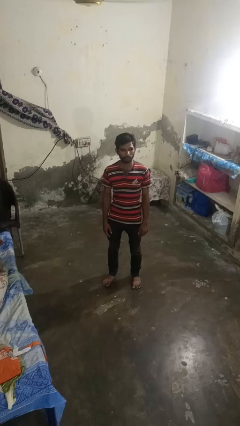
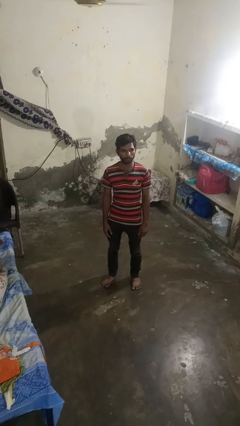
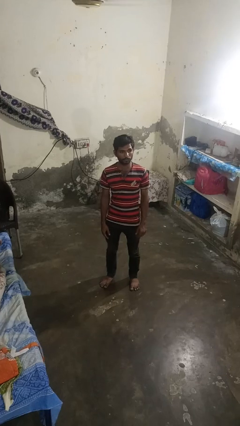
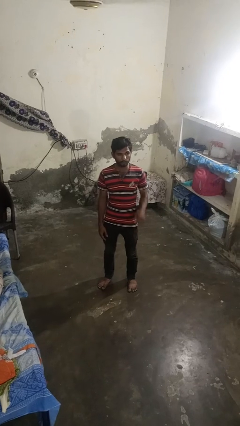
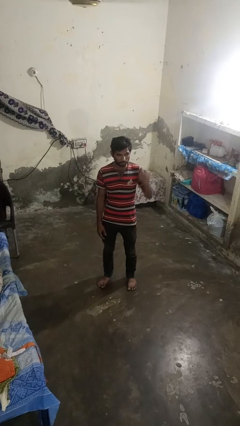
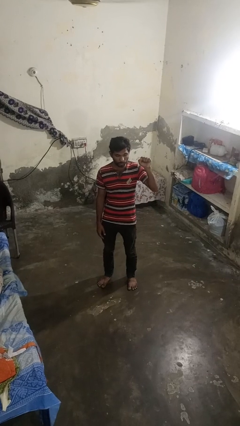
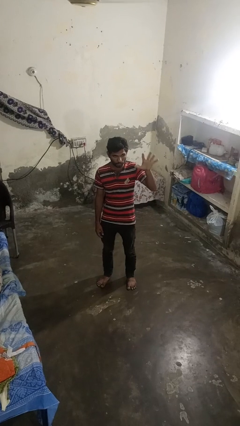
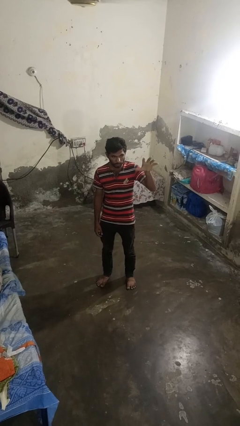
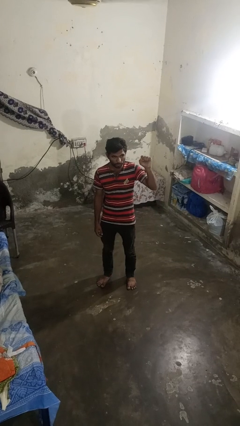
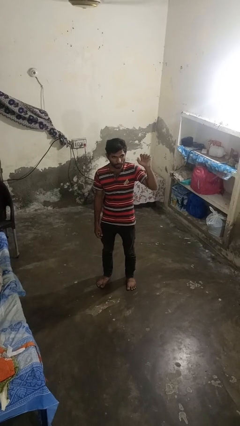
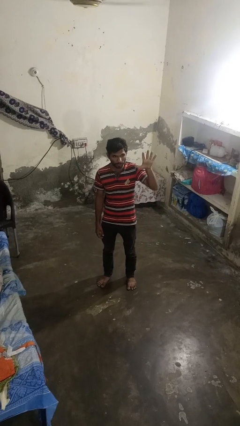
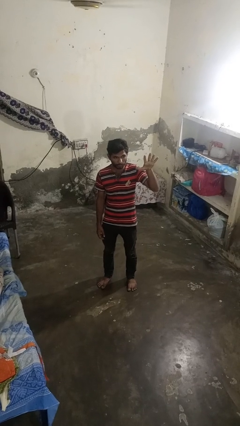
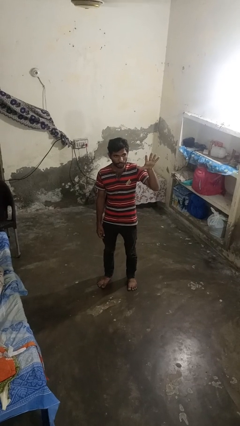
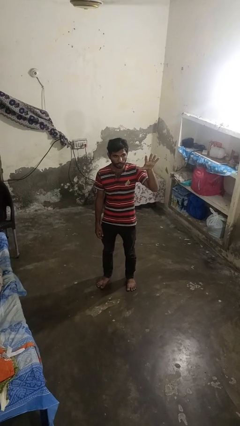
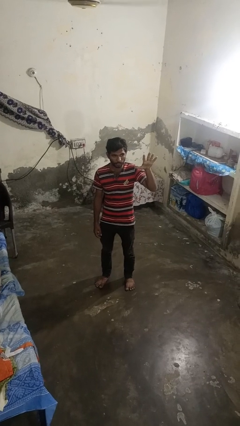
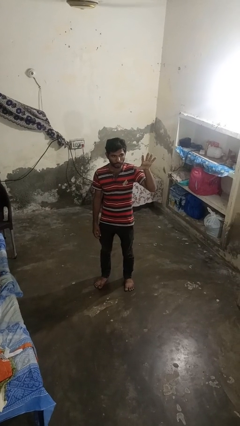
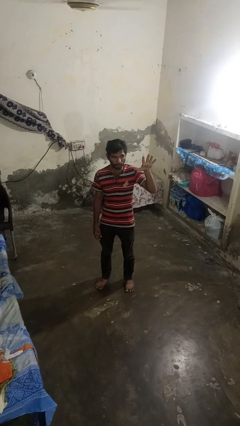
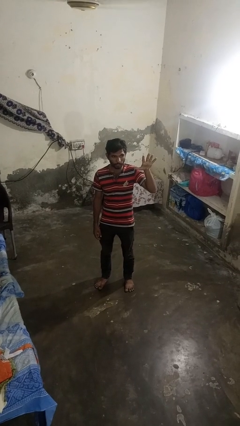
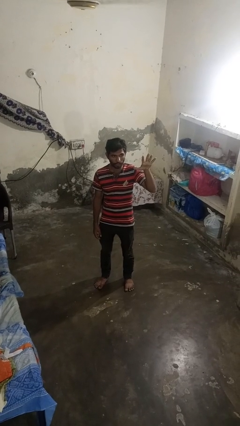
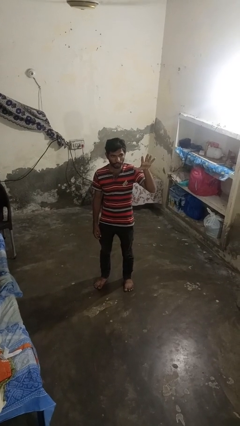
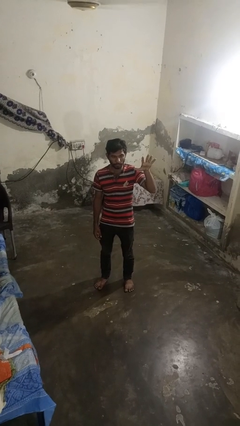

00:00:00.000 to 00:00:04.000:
person gestures number five

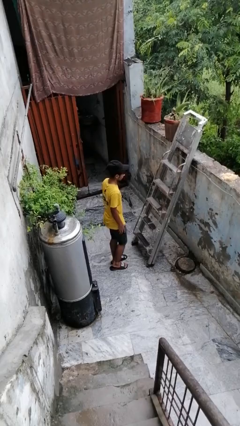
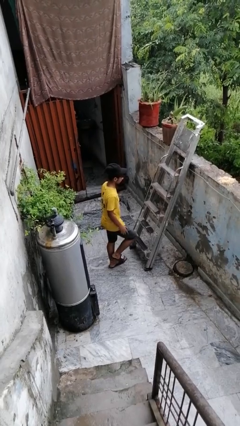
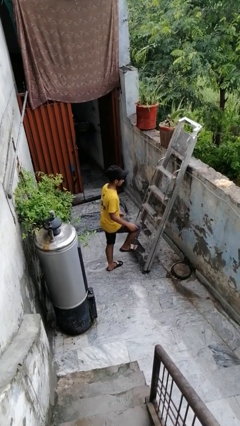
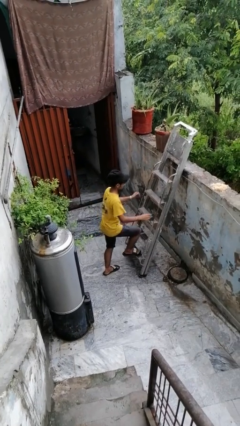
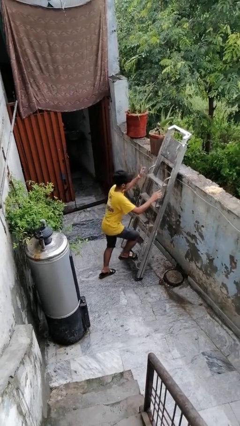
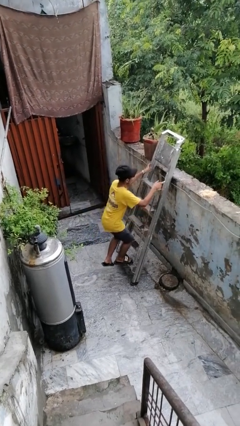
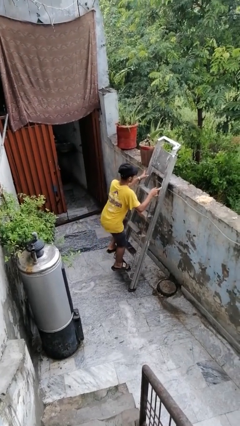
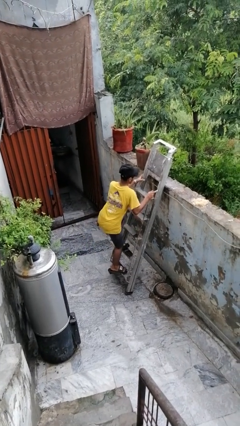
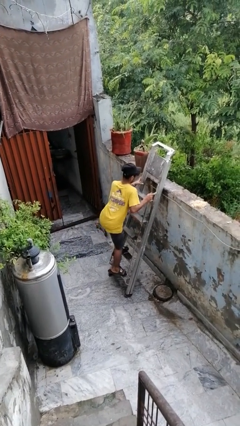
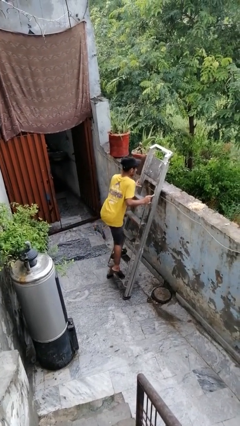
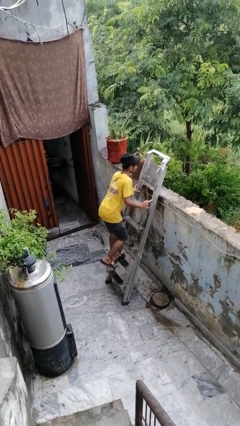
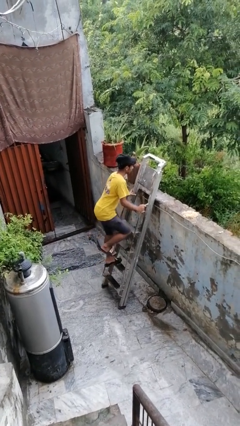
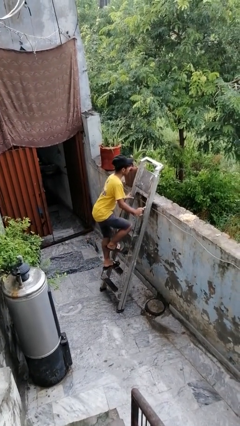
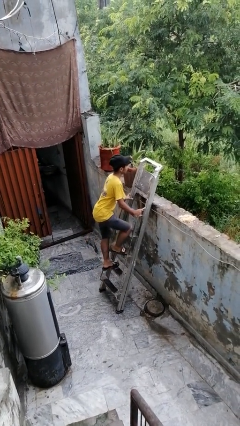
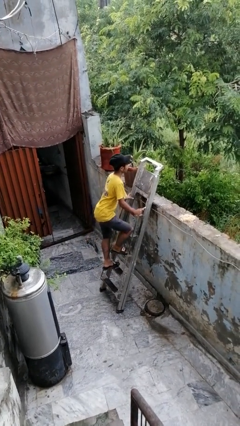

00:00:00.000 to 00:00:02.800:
person climbs up ladder

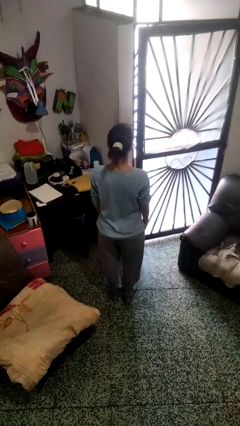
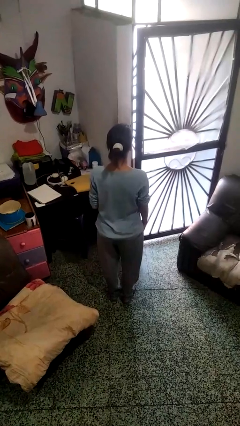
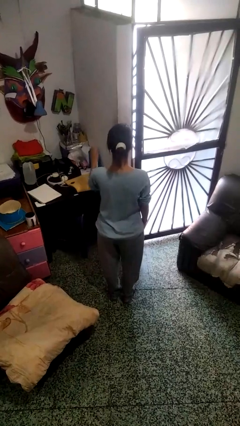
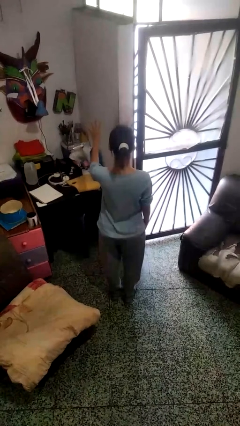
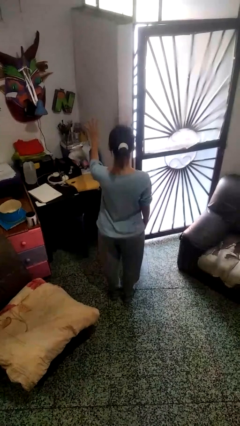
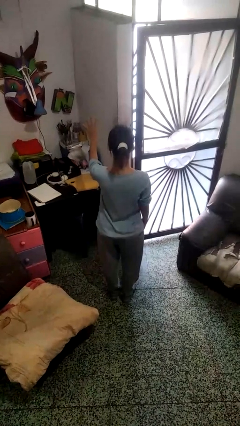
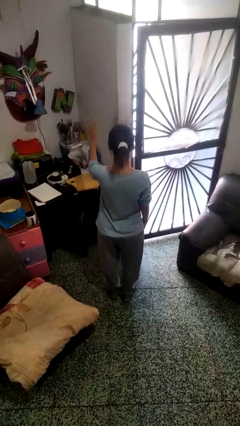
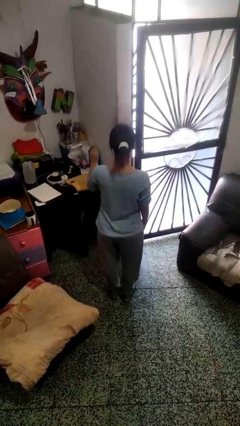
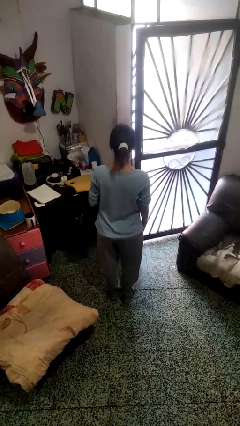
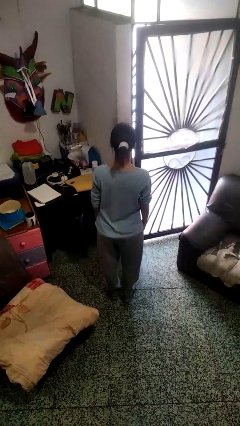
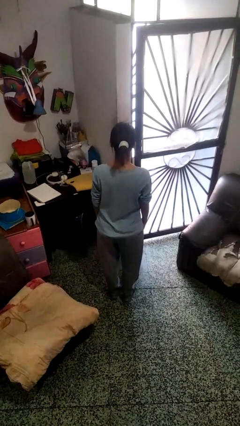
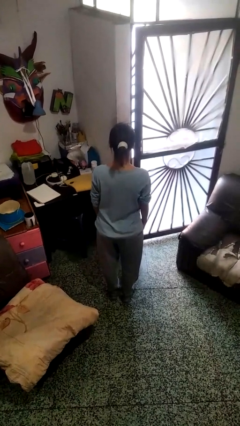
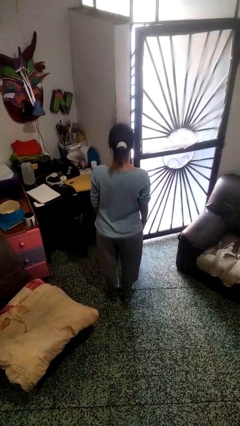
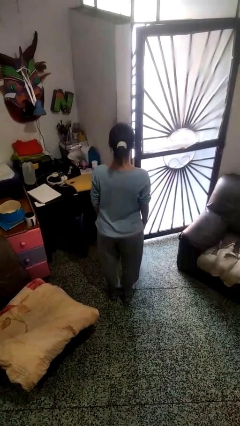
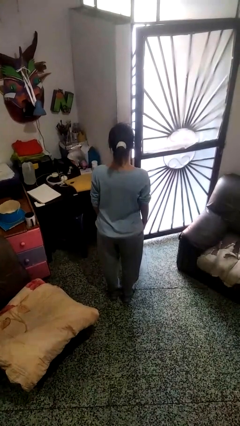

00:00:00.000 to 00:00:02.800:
person gestures number four

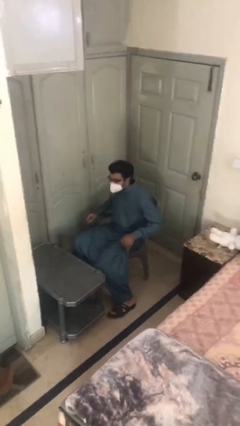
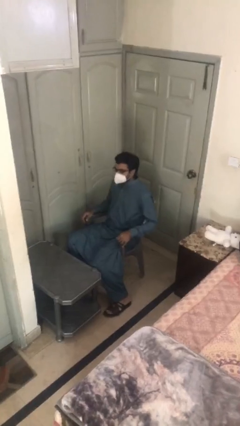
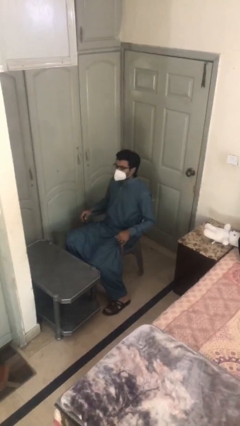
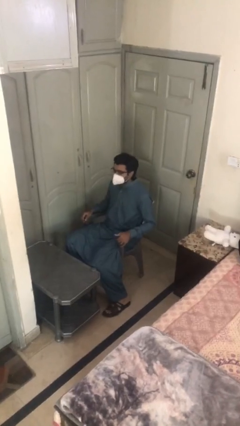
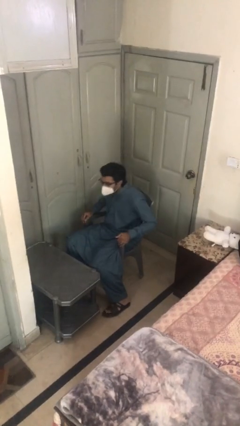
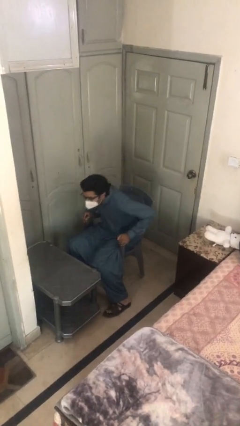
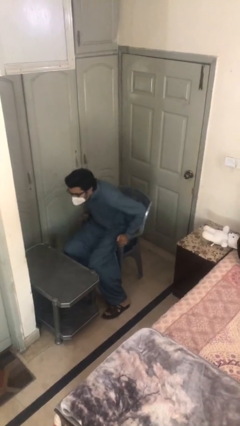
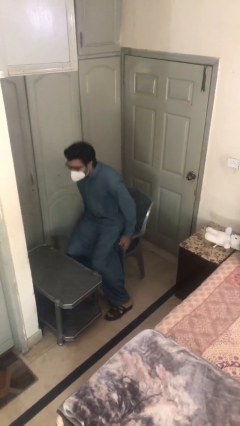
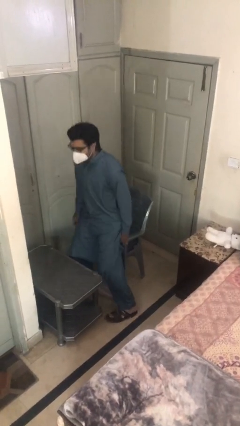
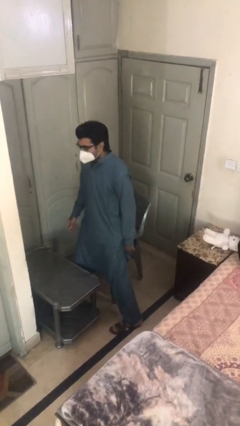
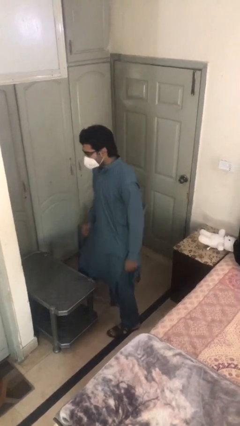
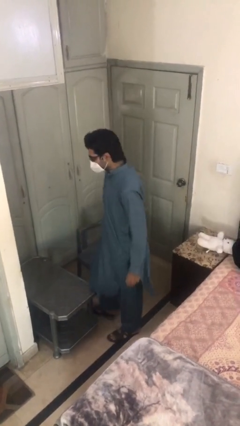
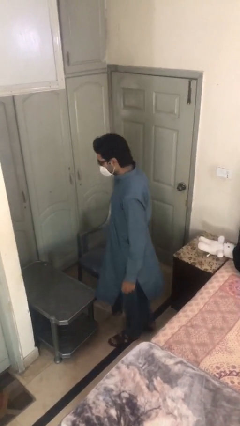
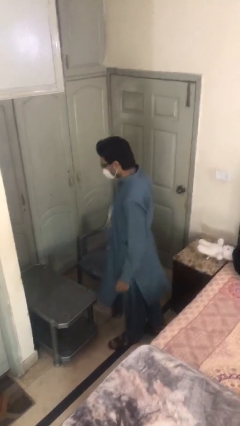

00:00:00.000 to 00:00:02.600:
person stands up

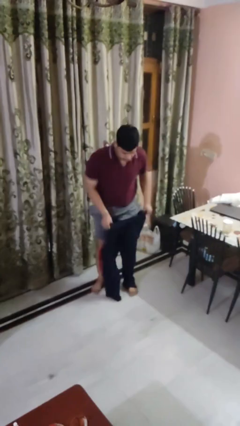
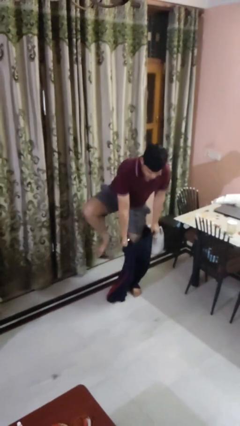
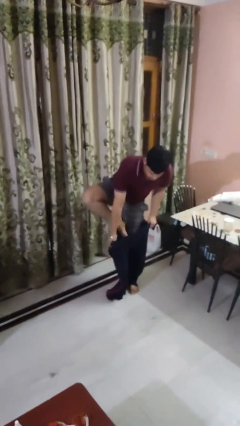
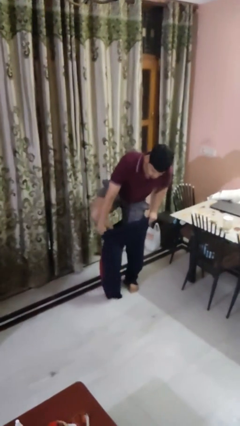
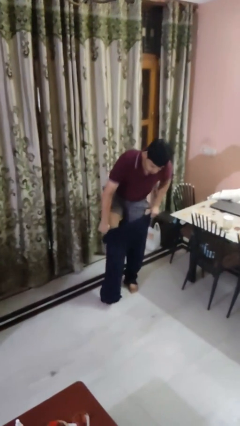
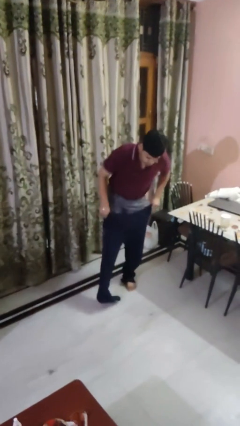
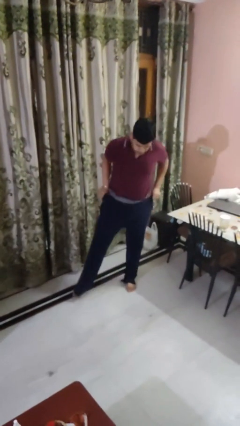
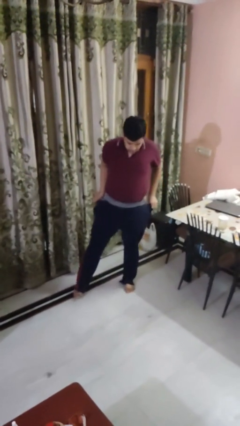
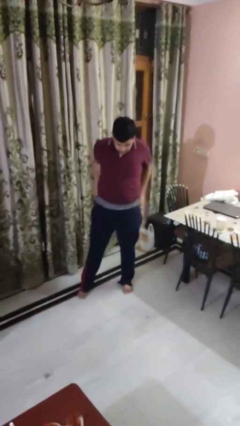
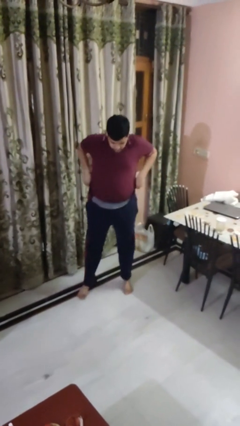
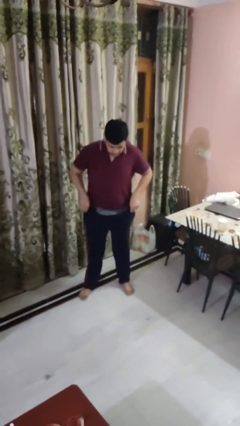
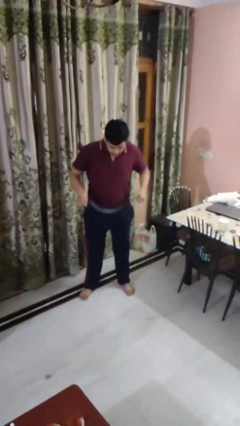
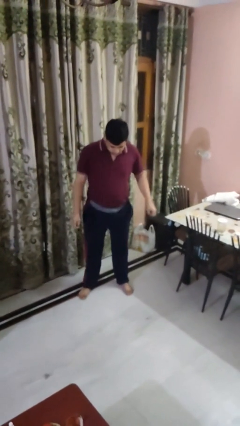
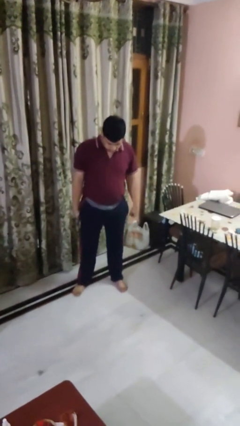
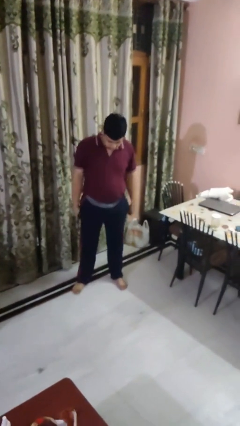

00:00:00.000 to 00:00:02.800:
person puts on pants

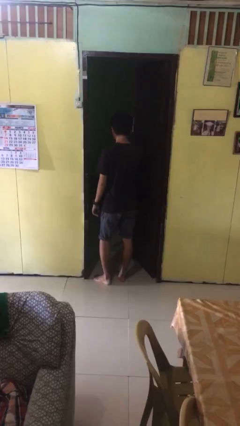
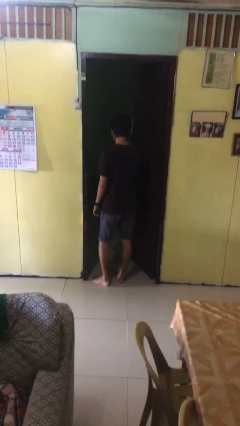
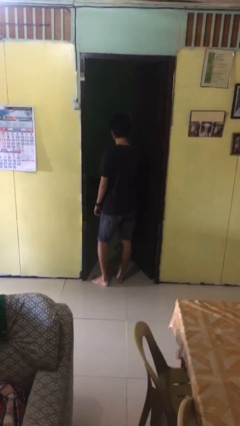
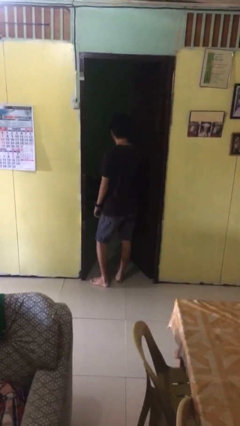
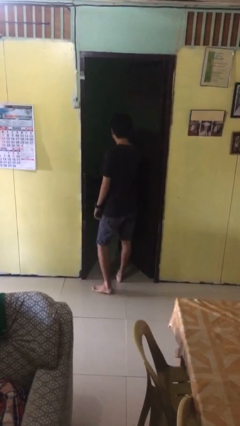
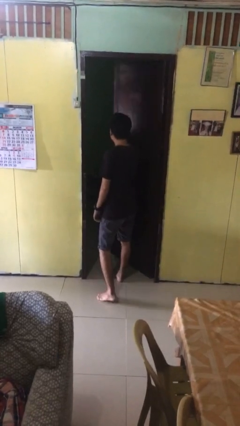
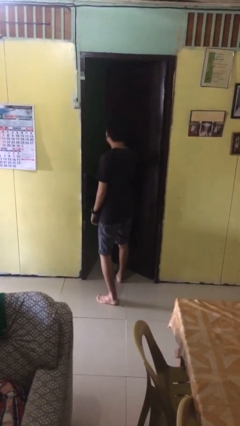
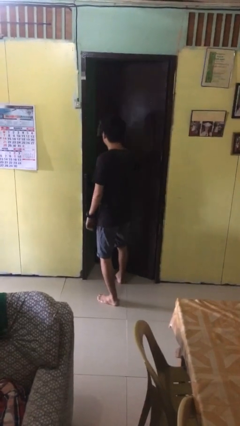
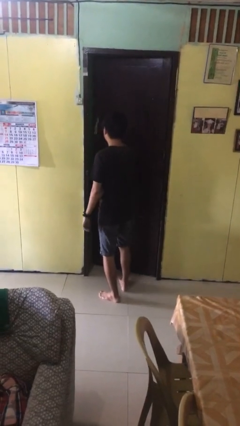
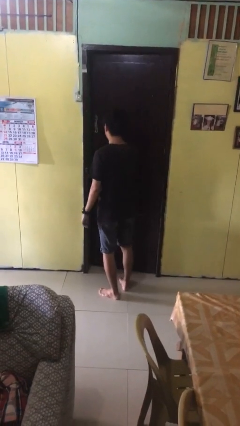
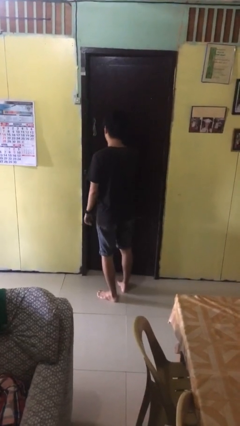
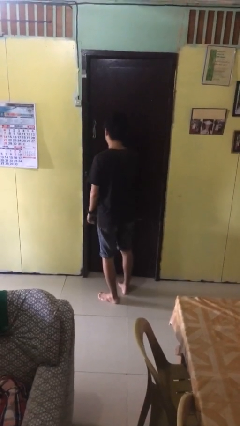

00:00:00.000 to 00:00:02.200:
person closes facility door

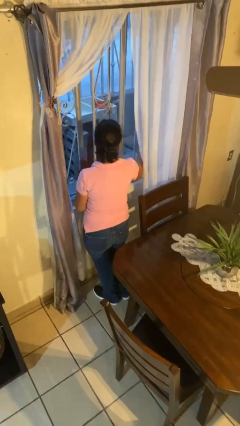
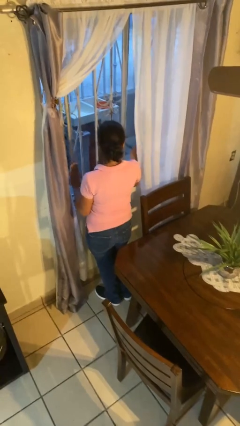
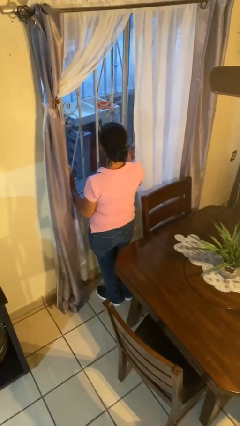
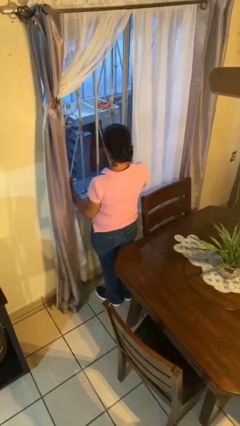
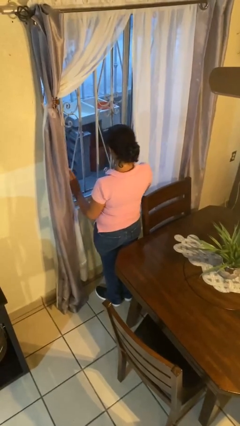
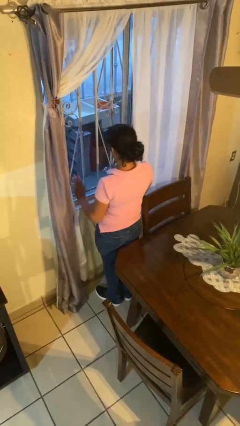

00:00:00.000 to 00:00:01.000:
person closes home window
